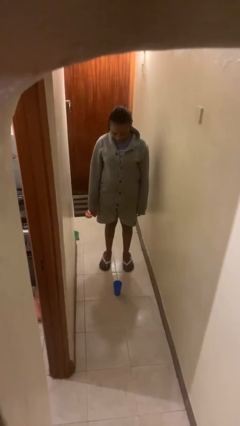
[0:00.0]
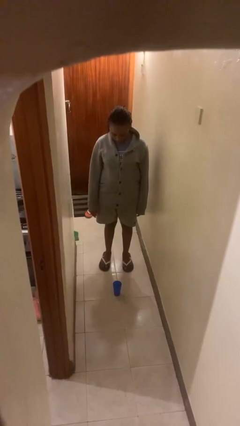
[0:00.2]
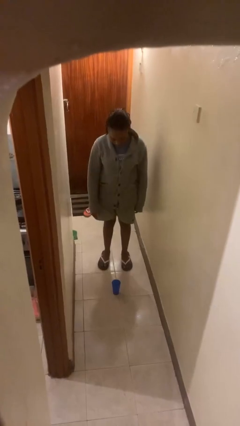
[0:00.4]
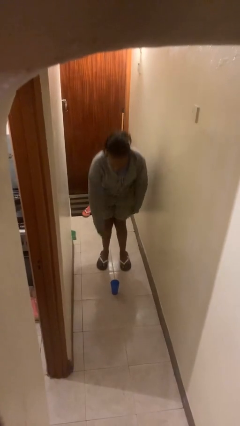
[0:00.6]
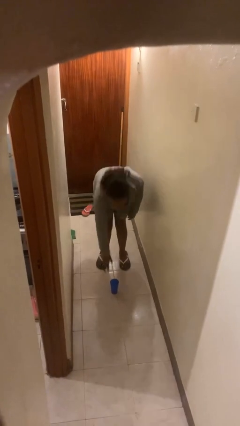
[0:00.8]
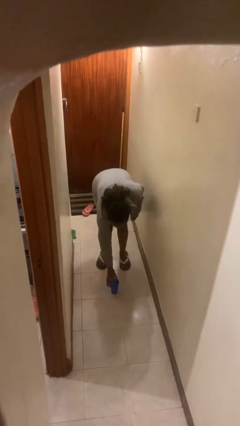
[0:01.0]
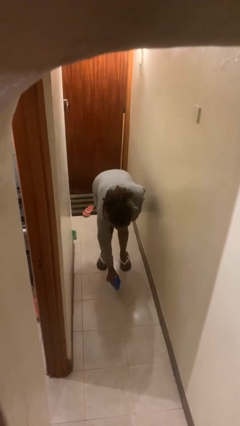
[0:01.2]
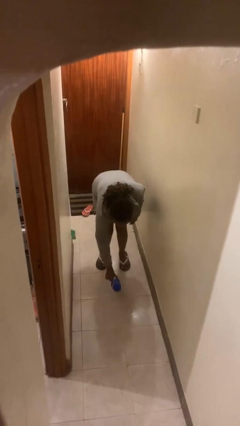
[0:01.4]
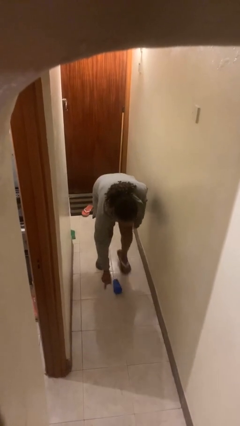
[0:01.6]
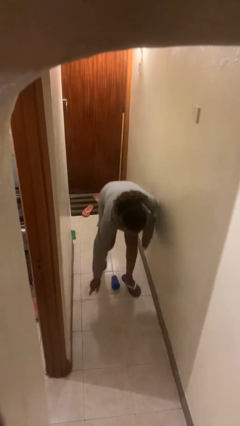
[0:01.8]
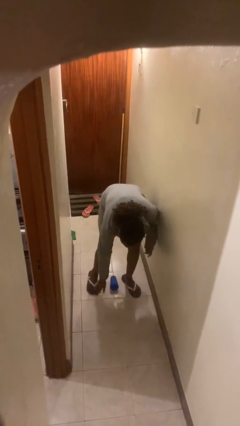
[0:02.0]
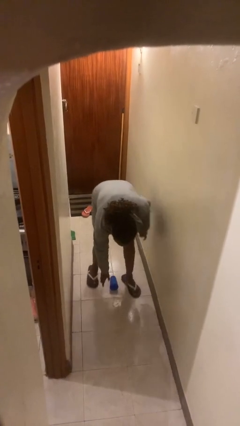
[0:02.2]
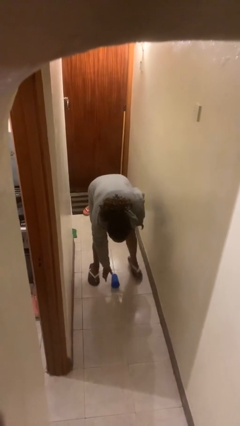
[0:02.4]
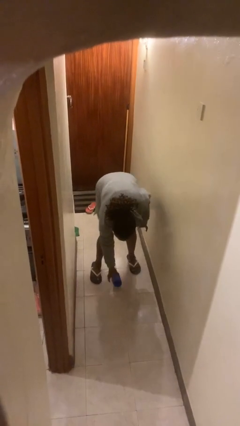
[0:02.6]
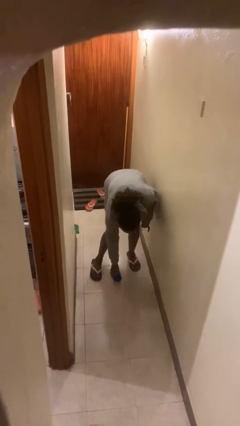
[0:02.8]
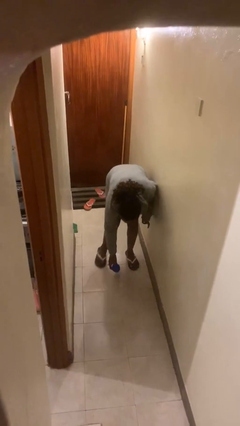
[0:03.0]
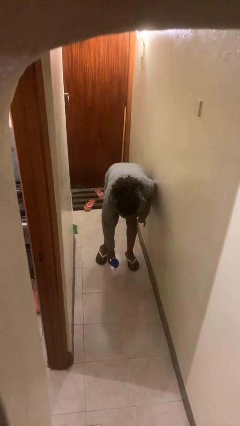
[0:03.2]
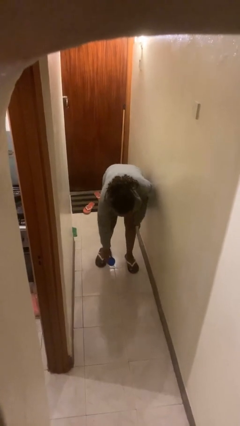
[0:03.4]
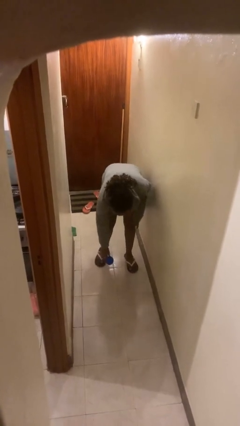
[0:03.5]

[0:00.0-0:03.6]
person spills on floor

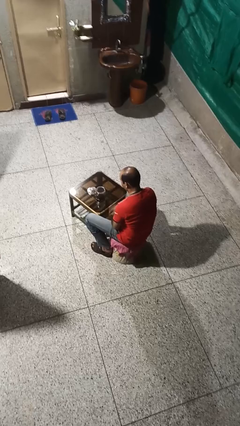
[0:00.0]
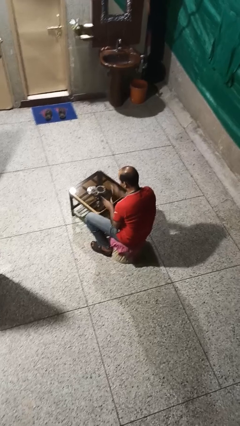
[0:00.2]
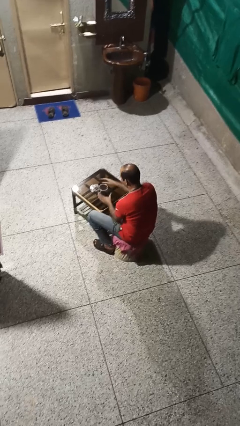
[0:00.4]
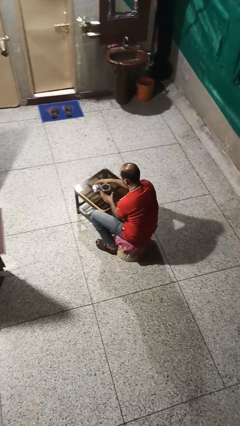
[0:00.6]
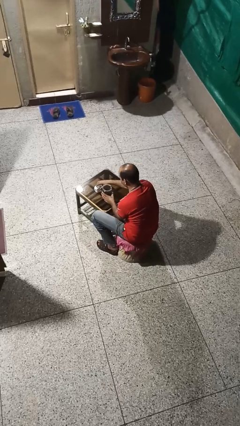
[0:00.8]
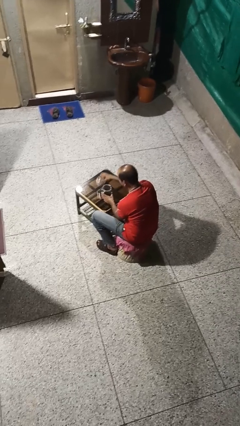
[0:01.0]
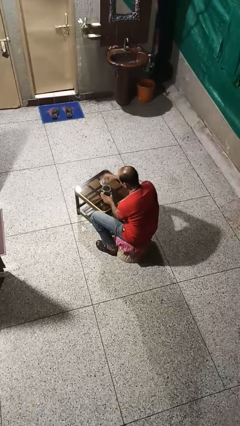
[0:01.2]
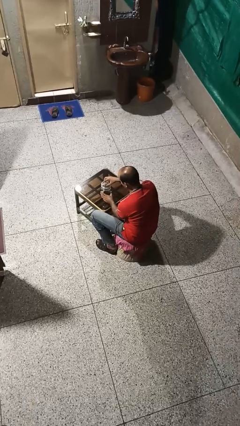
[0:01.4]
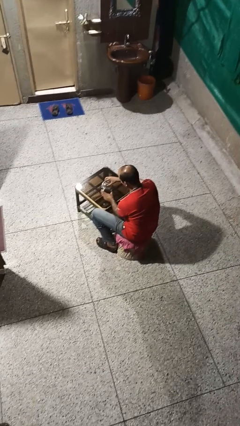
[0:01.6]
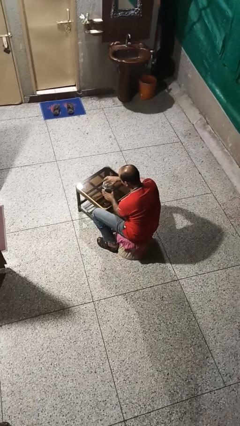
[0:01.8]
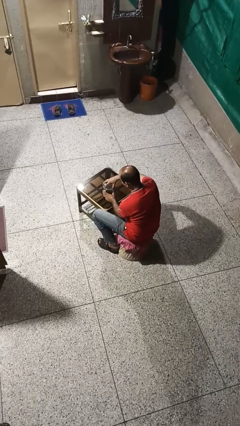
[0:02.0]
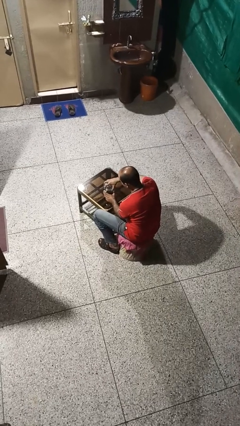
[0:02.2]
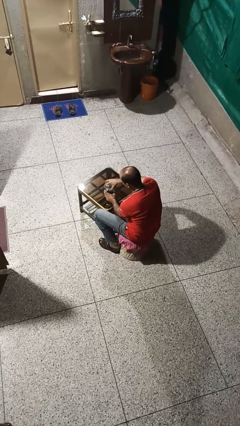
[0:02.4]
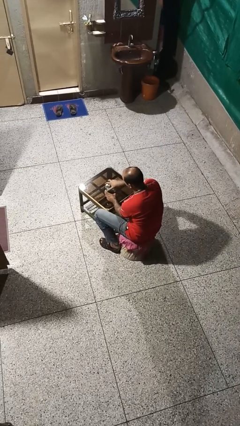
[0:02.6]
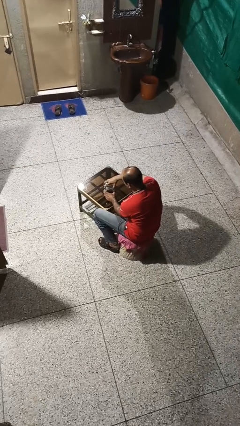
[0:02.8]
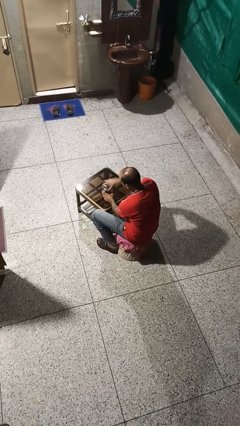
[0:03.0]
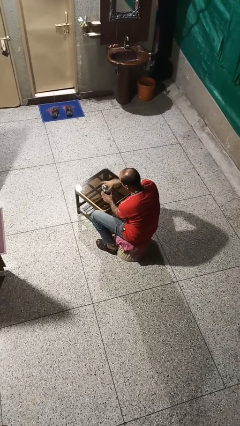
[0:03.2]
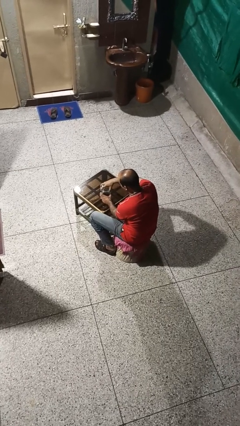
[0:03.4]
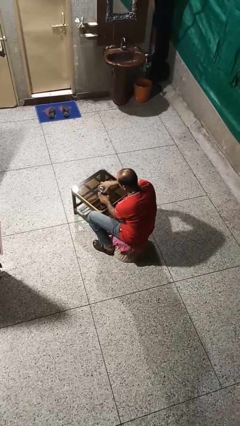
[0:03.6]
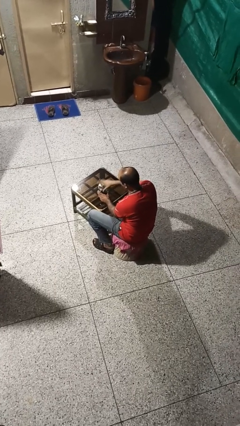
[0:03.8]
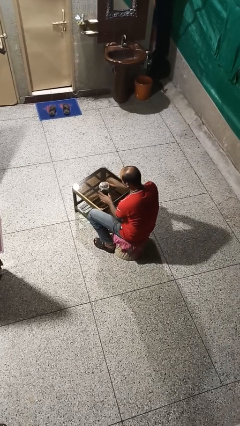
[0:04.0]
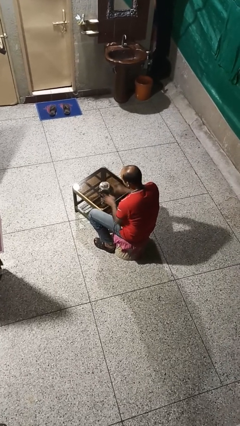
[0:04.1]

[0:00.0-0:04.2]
person closes jar

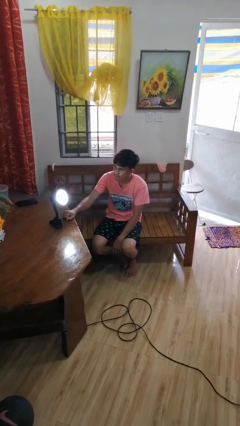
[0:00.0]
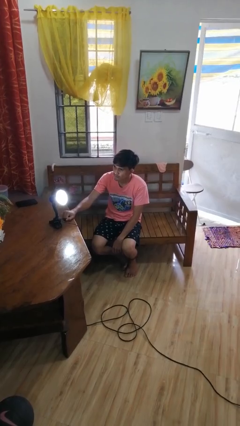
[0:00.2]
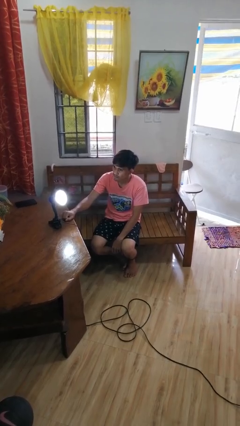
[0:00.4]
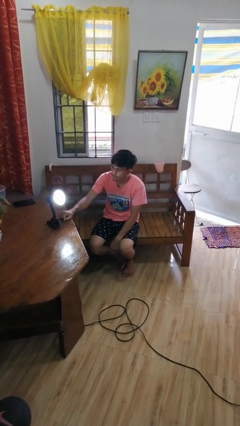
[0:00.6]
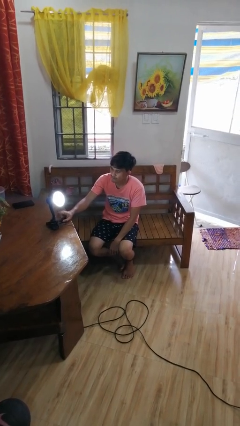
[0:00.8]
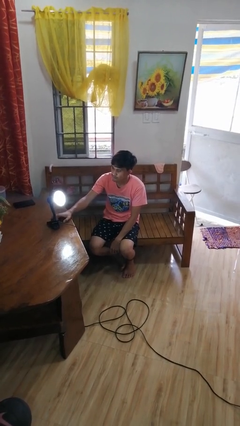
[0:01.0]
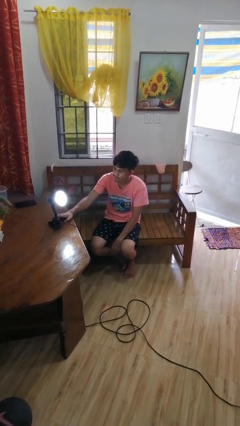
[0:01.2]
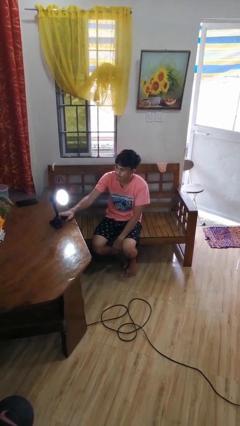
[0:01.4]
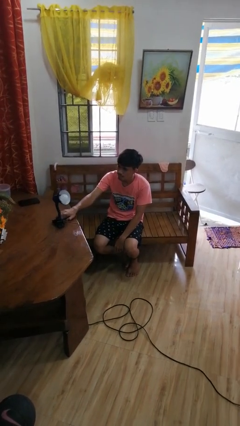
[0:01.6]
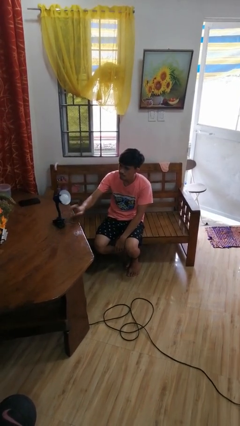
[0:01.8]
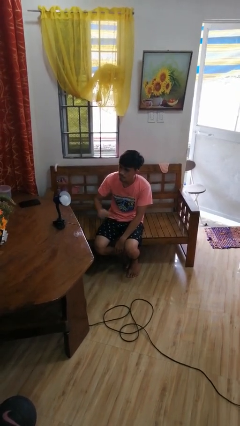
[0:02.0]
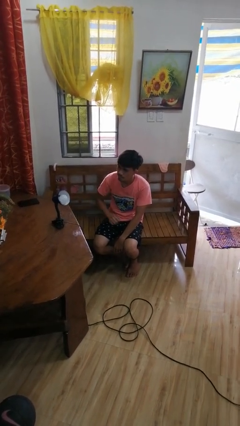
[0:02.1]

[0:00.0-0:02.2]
person turns off lamp

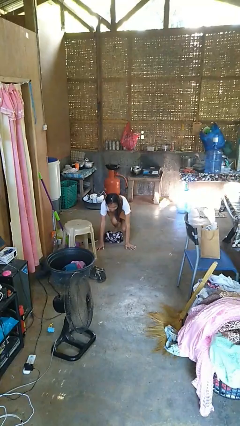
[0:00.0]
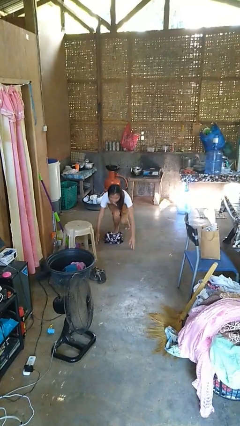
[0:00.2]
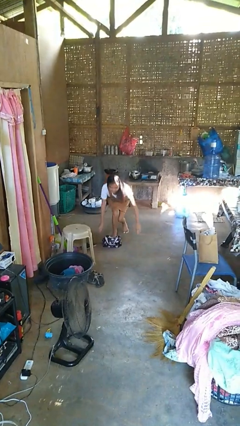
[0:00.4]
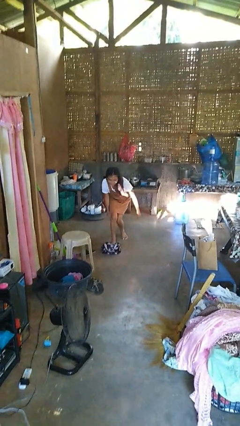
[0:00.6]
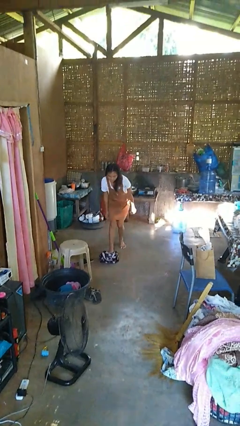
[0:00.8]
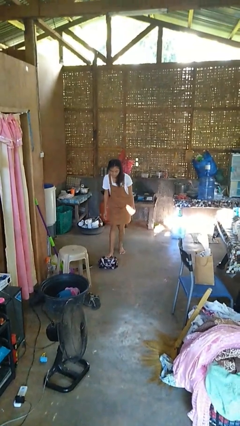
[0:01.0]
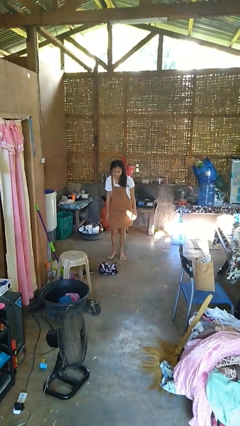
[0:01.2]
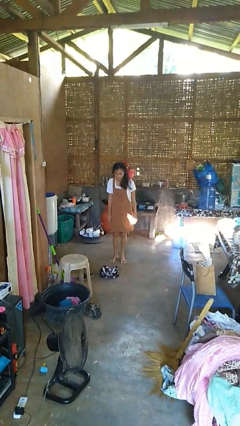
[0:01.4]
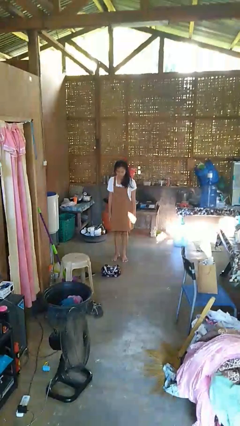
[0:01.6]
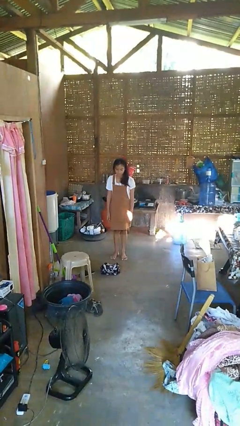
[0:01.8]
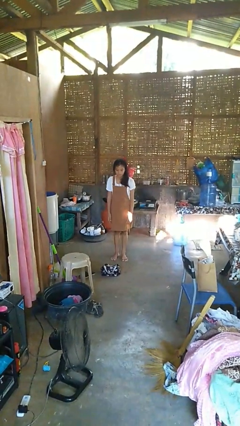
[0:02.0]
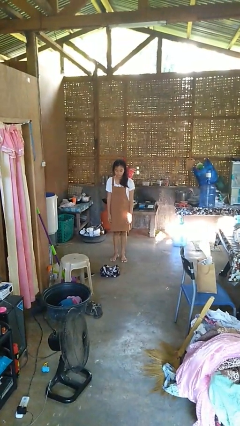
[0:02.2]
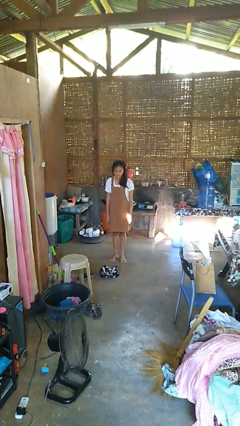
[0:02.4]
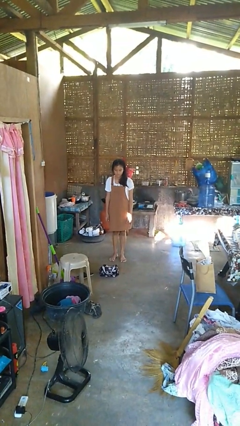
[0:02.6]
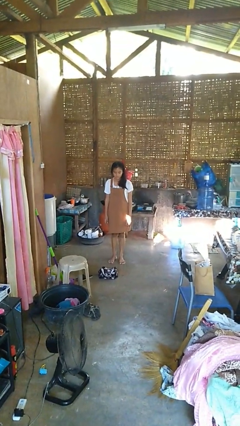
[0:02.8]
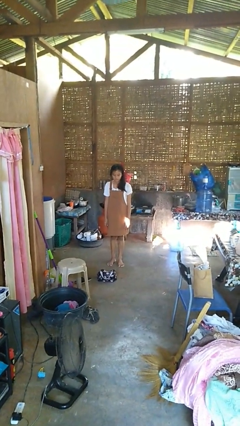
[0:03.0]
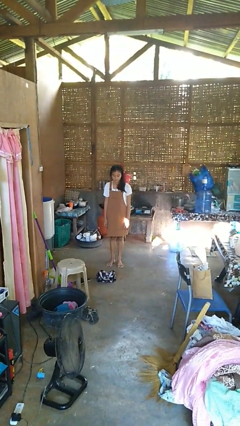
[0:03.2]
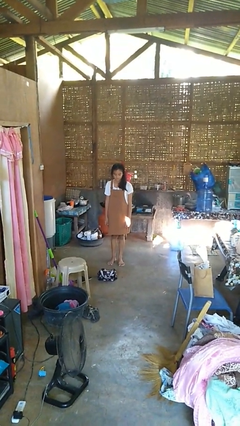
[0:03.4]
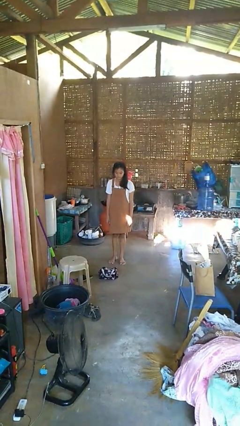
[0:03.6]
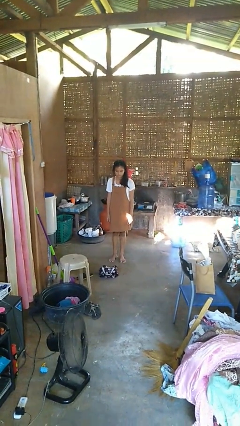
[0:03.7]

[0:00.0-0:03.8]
person stands up from floor

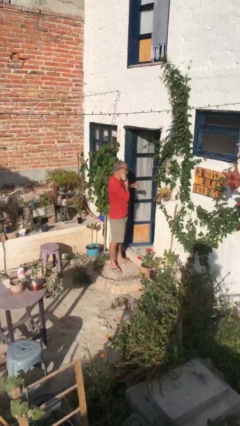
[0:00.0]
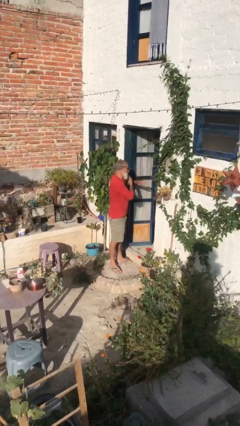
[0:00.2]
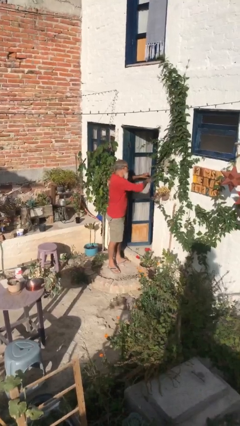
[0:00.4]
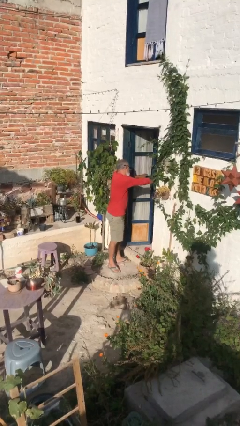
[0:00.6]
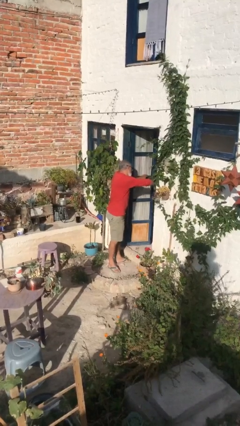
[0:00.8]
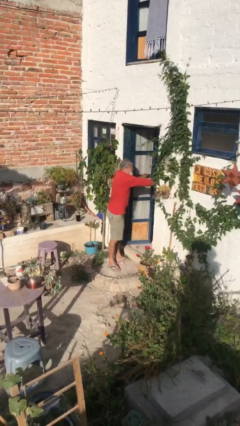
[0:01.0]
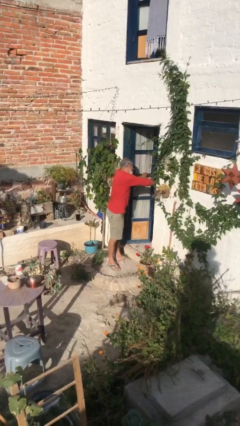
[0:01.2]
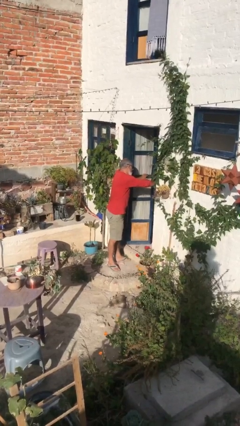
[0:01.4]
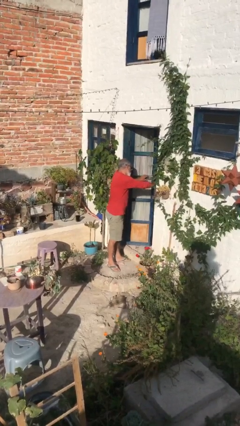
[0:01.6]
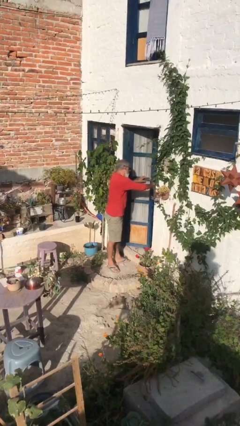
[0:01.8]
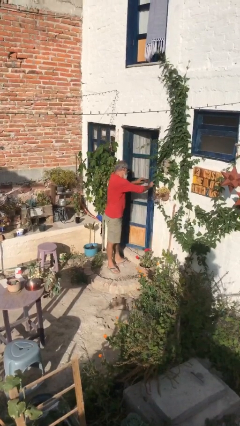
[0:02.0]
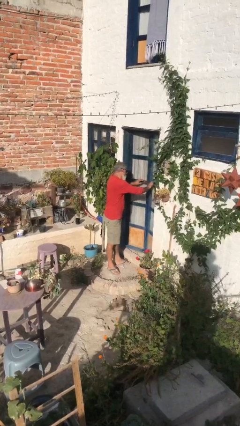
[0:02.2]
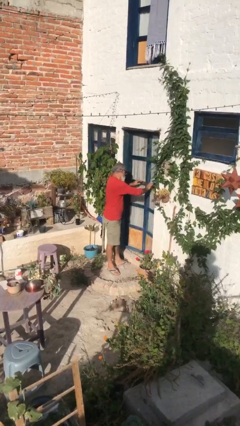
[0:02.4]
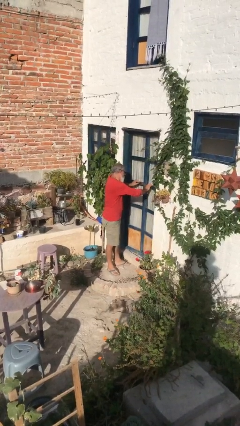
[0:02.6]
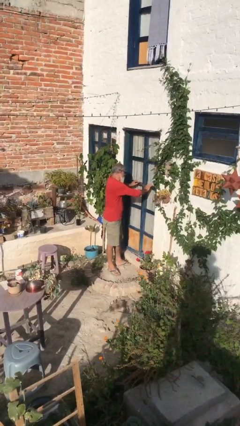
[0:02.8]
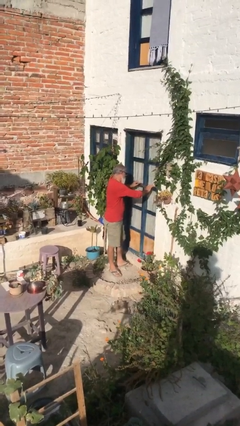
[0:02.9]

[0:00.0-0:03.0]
person closes facility door

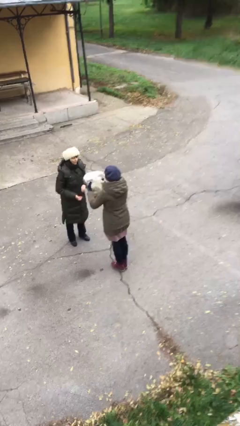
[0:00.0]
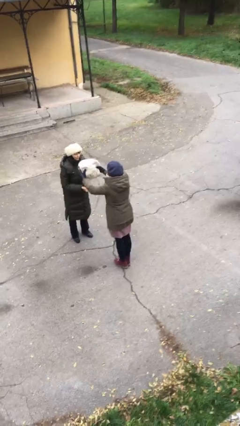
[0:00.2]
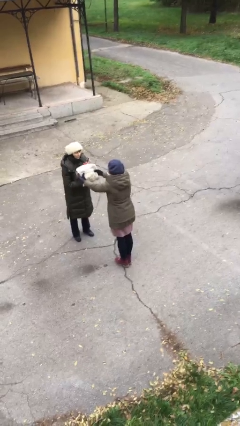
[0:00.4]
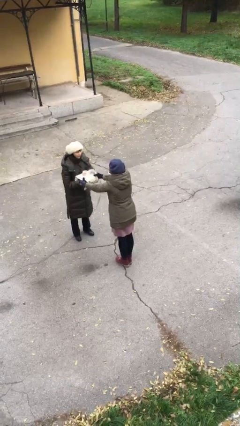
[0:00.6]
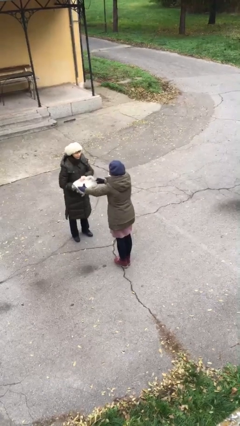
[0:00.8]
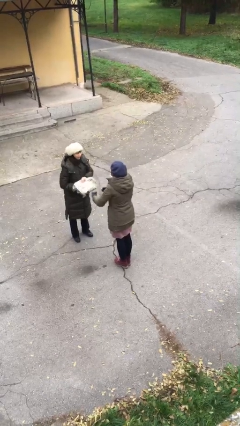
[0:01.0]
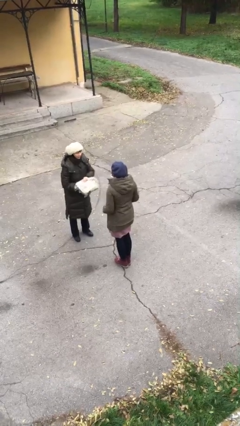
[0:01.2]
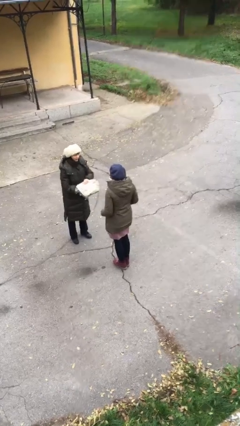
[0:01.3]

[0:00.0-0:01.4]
person transfers object to person
